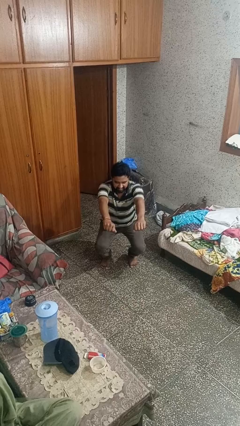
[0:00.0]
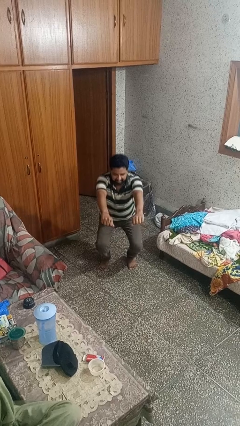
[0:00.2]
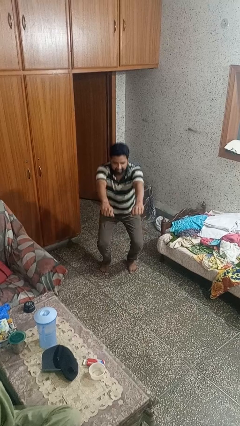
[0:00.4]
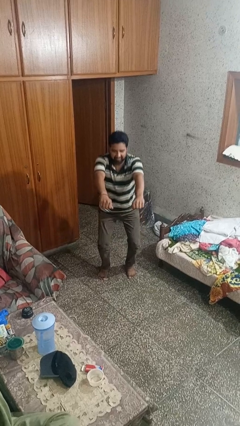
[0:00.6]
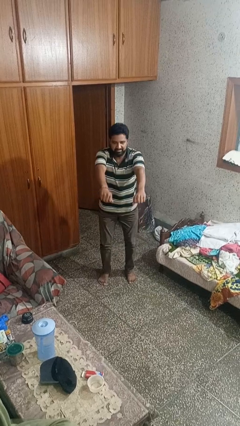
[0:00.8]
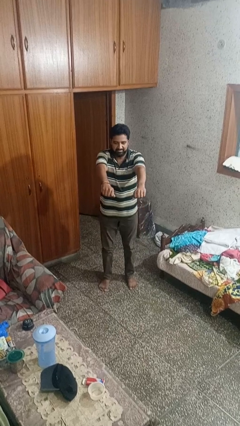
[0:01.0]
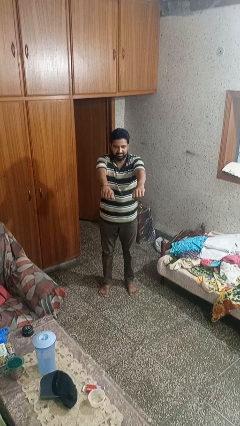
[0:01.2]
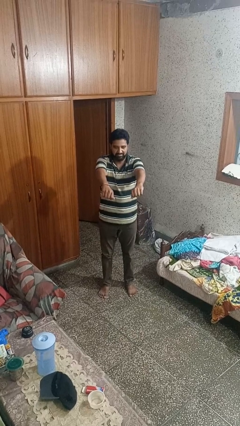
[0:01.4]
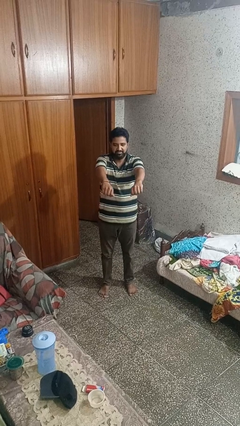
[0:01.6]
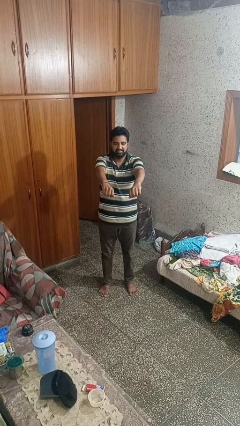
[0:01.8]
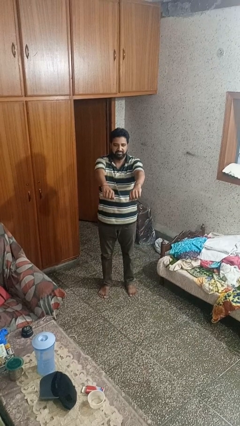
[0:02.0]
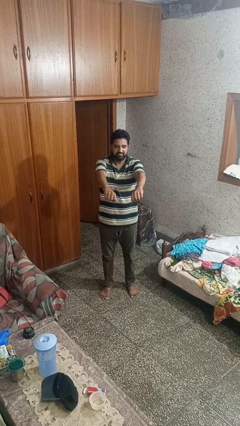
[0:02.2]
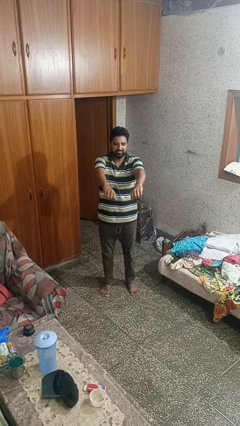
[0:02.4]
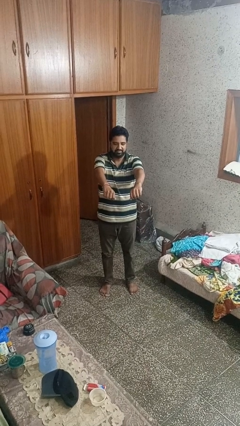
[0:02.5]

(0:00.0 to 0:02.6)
person stands up

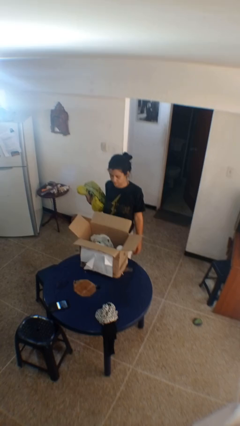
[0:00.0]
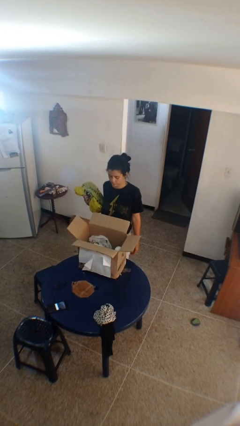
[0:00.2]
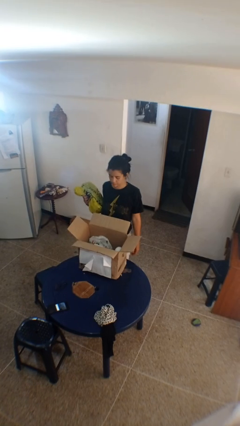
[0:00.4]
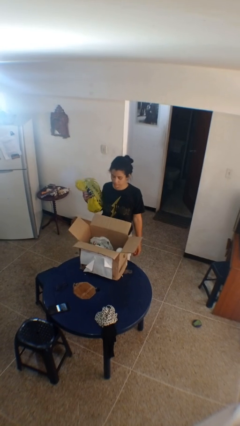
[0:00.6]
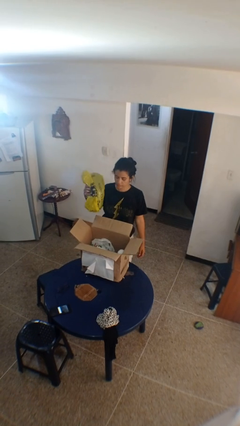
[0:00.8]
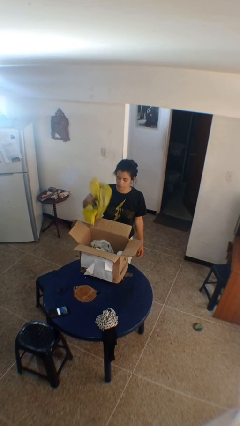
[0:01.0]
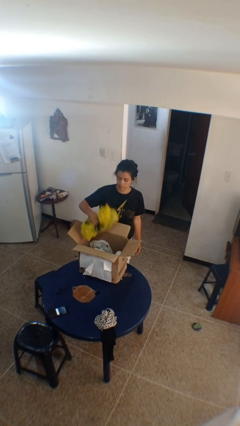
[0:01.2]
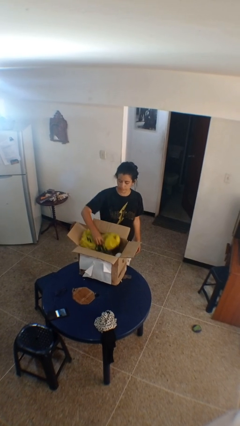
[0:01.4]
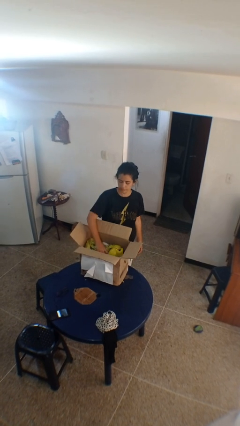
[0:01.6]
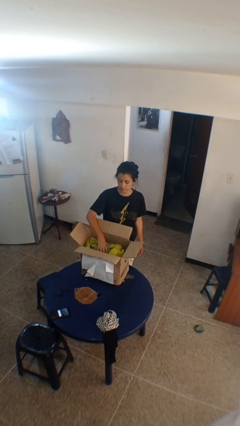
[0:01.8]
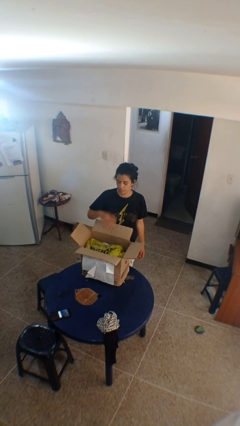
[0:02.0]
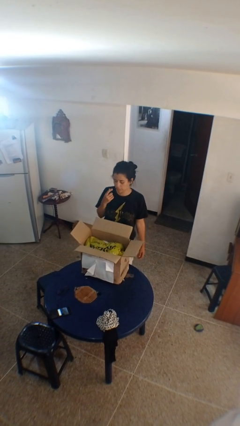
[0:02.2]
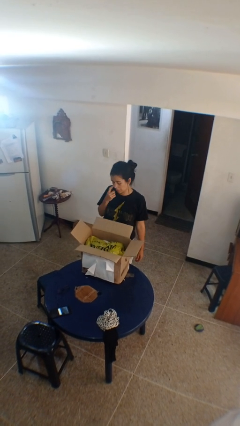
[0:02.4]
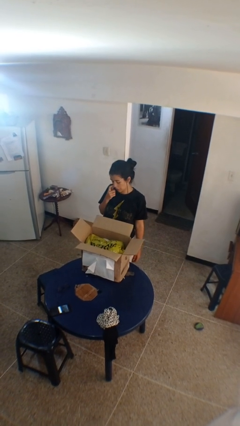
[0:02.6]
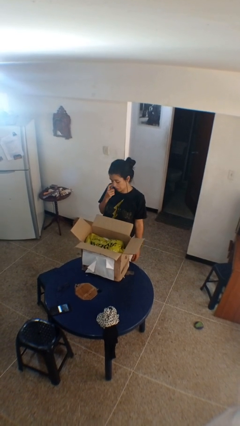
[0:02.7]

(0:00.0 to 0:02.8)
person puts object into box

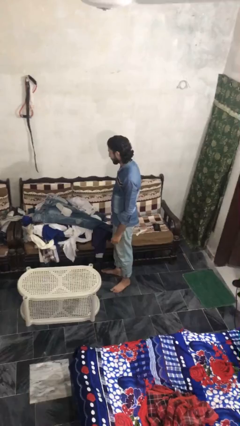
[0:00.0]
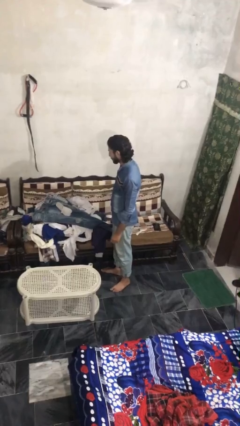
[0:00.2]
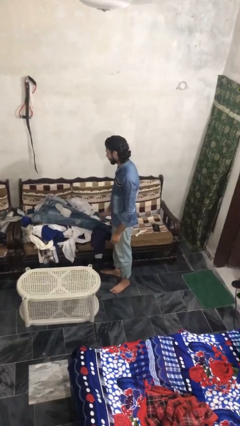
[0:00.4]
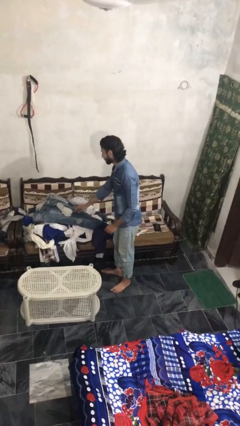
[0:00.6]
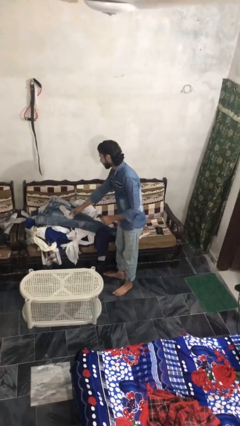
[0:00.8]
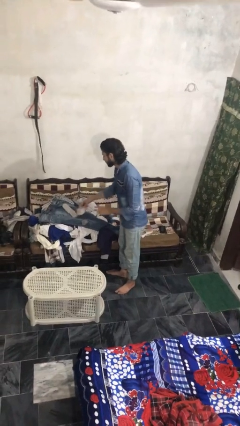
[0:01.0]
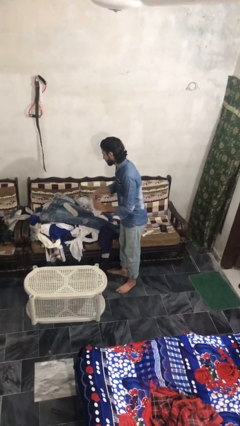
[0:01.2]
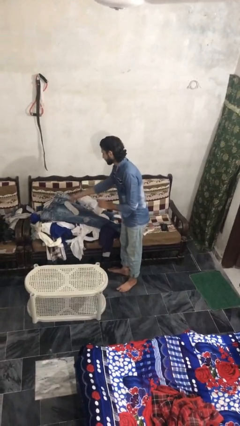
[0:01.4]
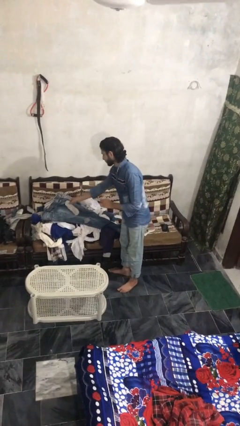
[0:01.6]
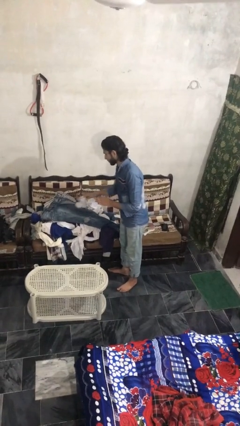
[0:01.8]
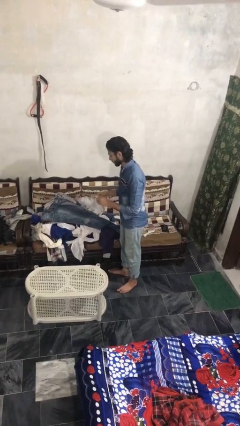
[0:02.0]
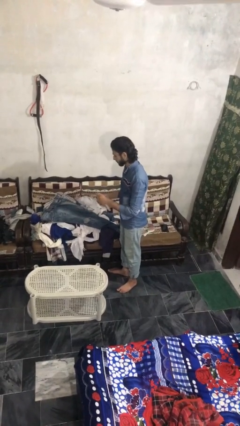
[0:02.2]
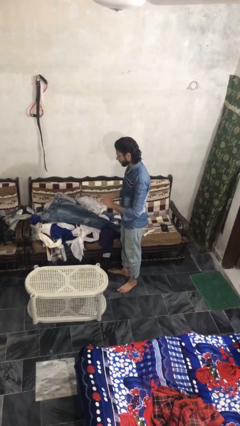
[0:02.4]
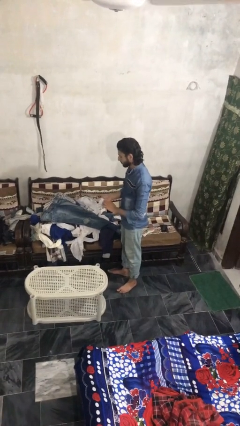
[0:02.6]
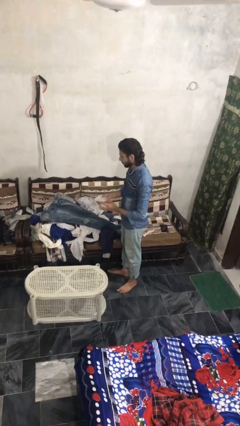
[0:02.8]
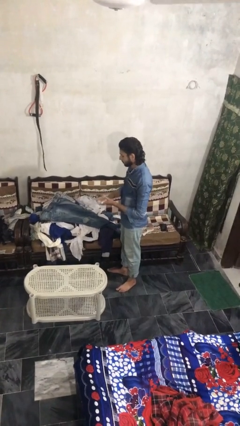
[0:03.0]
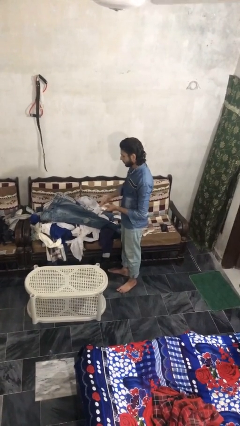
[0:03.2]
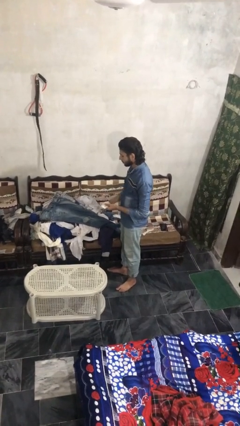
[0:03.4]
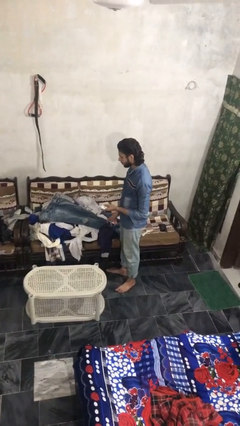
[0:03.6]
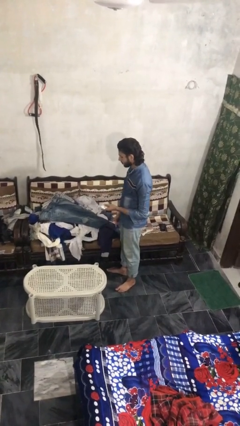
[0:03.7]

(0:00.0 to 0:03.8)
person folds socks

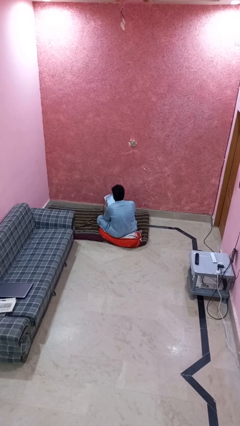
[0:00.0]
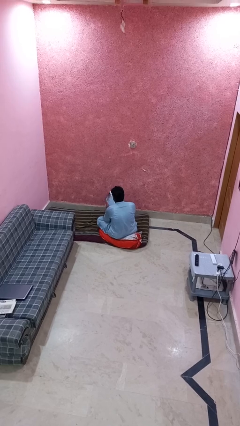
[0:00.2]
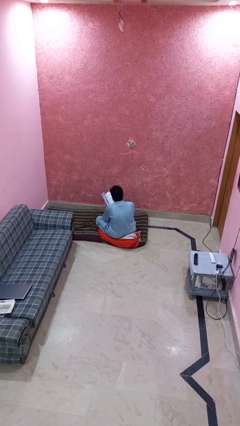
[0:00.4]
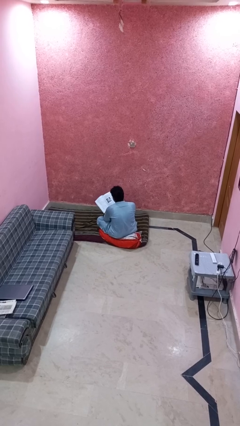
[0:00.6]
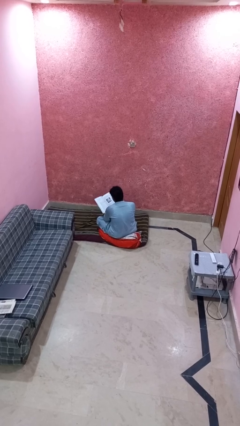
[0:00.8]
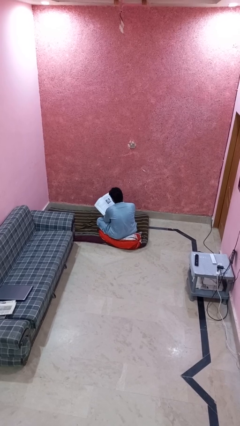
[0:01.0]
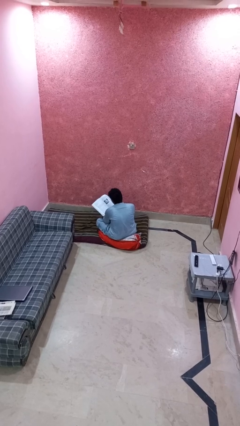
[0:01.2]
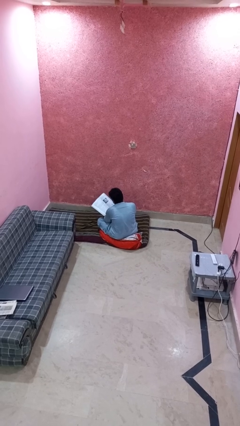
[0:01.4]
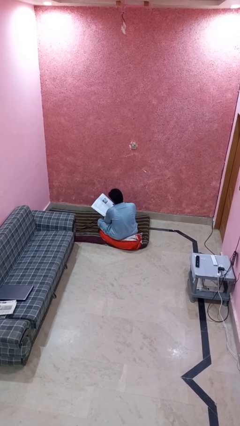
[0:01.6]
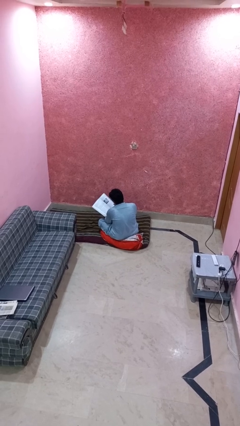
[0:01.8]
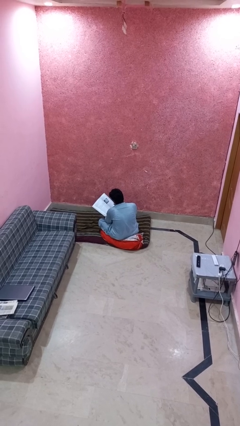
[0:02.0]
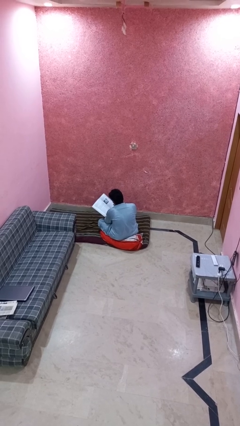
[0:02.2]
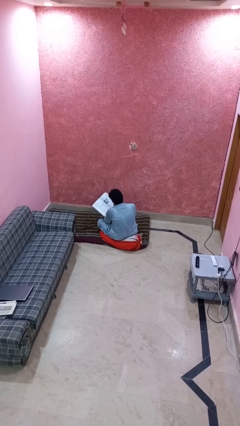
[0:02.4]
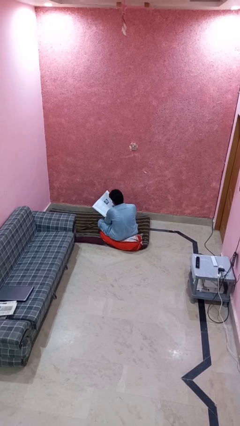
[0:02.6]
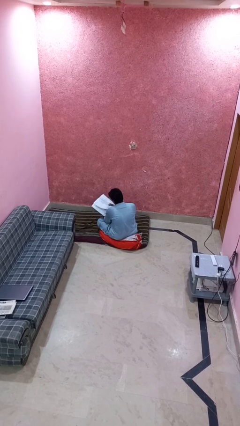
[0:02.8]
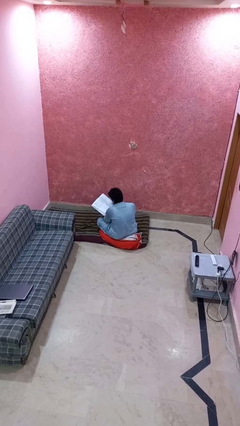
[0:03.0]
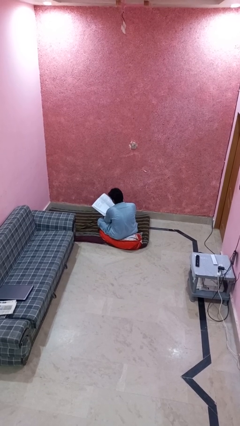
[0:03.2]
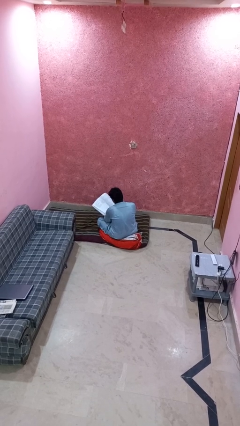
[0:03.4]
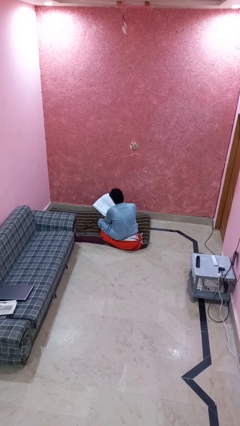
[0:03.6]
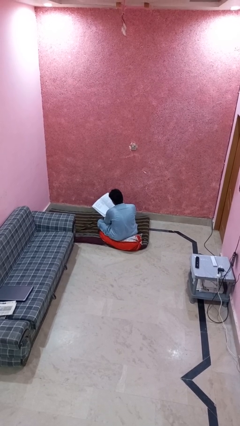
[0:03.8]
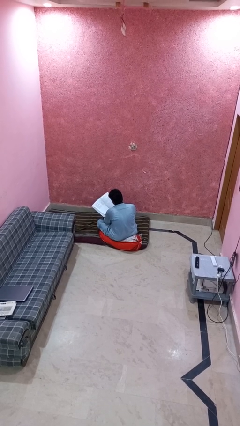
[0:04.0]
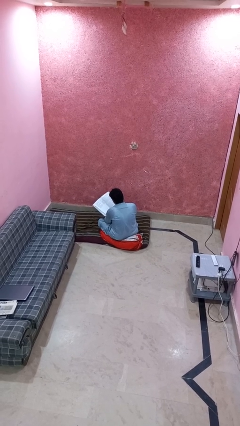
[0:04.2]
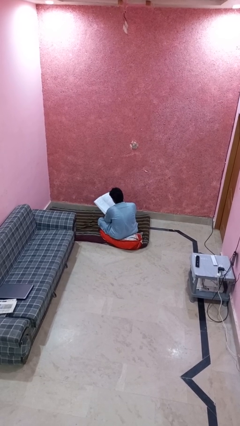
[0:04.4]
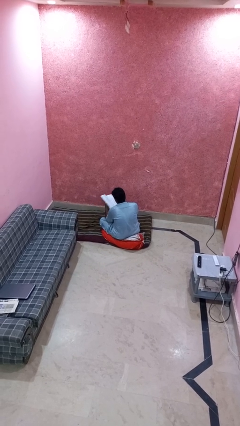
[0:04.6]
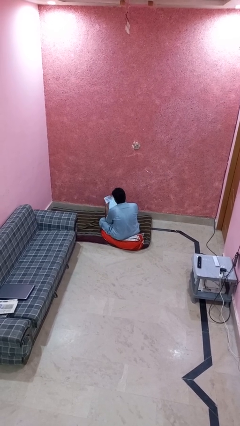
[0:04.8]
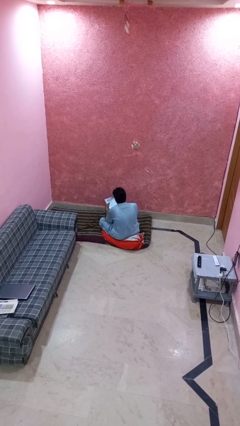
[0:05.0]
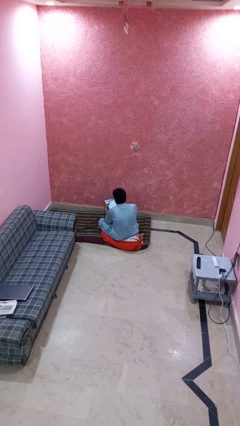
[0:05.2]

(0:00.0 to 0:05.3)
person reads magazine

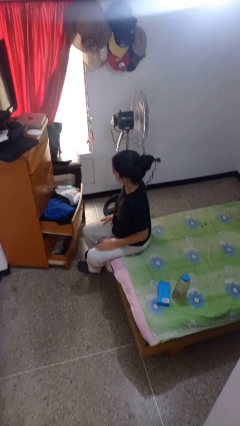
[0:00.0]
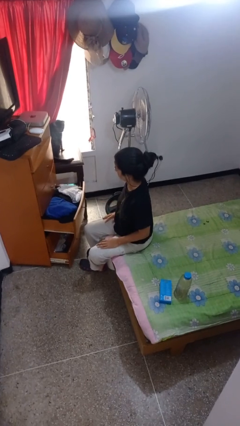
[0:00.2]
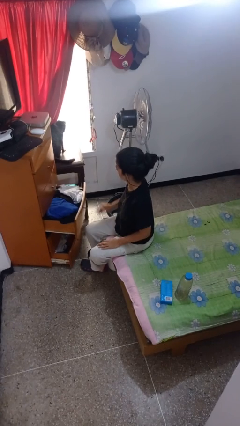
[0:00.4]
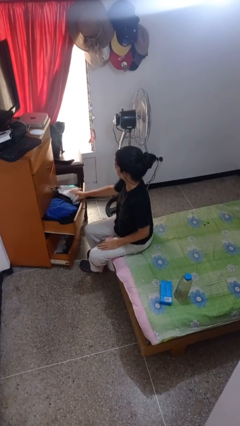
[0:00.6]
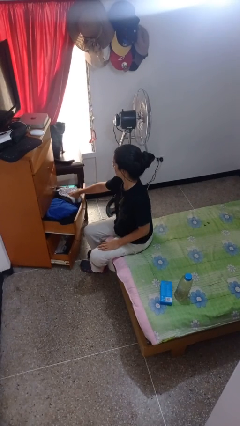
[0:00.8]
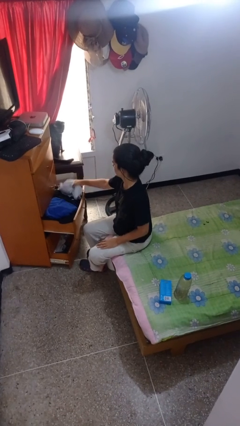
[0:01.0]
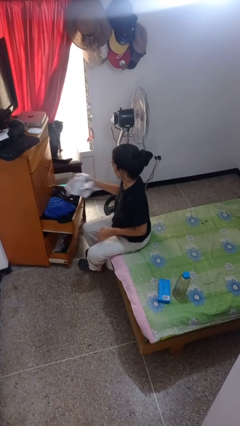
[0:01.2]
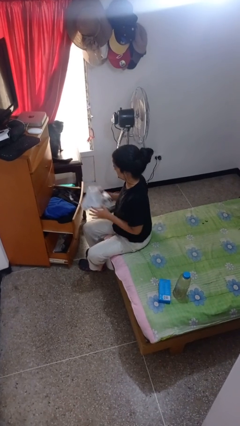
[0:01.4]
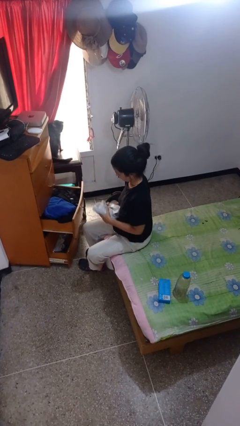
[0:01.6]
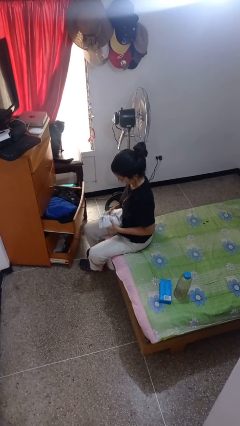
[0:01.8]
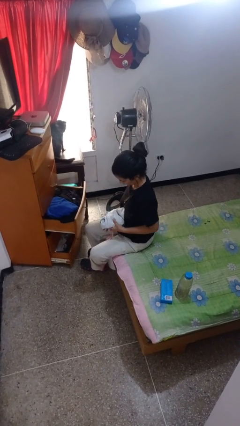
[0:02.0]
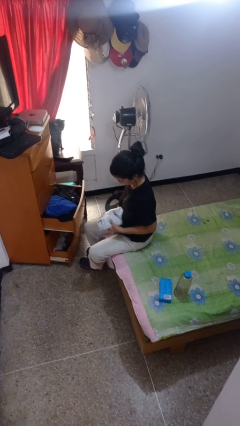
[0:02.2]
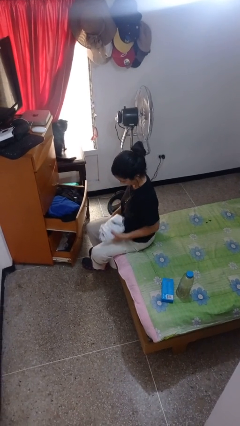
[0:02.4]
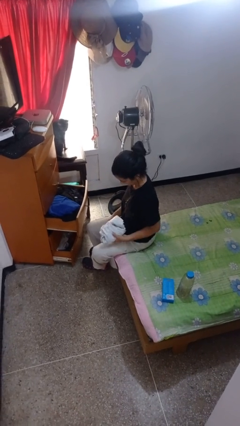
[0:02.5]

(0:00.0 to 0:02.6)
person takes clothes from dresser

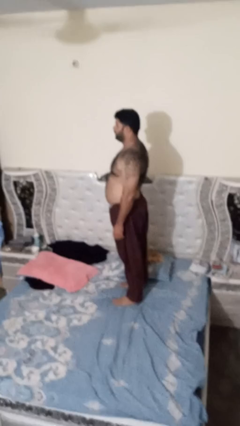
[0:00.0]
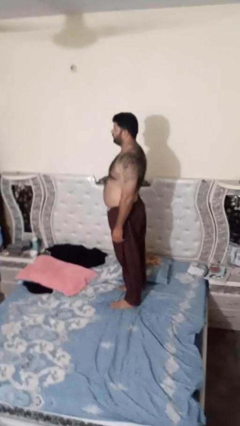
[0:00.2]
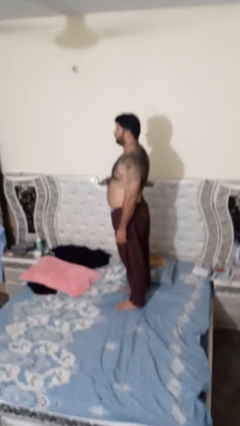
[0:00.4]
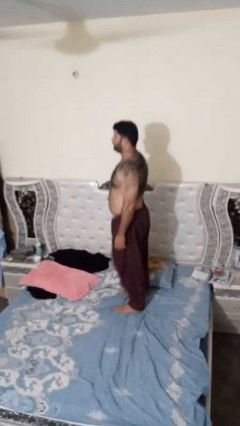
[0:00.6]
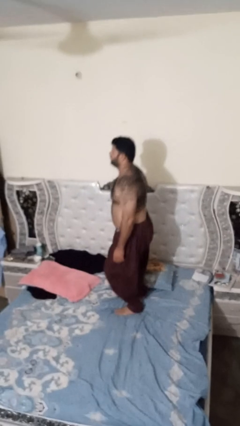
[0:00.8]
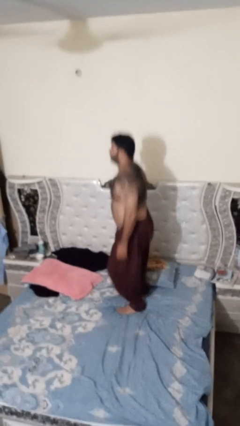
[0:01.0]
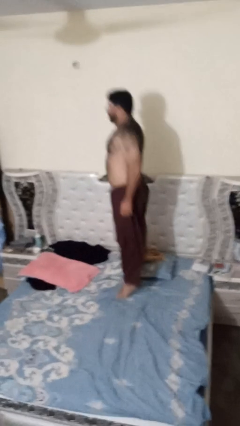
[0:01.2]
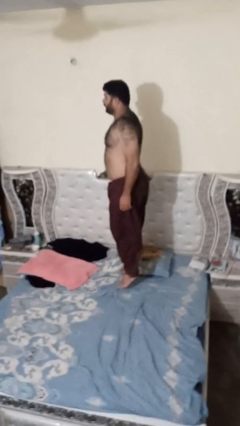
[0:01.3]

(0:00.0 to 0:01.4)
person jumps on bed
